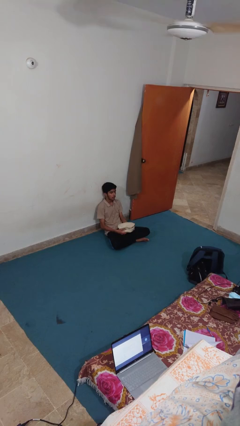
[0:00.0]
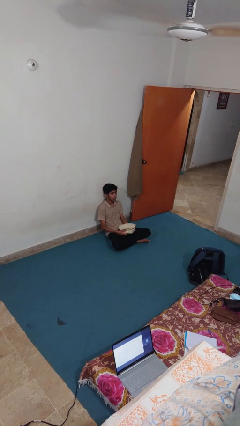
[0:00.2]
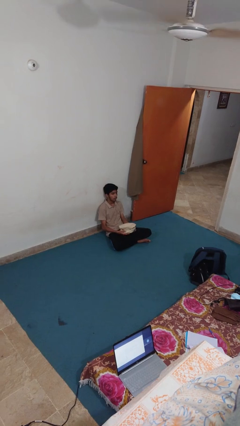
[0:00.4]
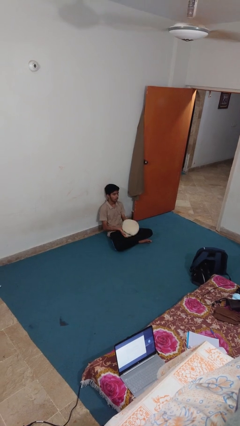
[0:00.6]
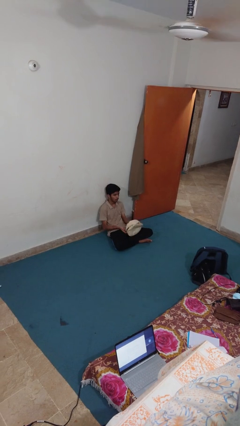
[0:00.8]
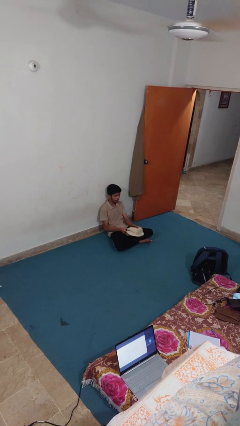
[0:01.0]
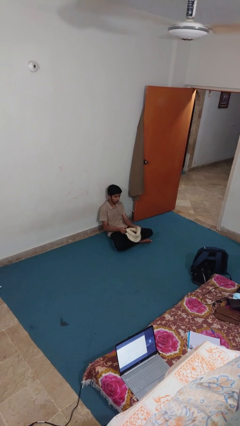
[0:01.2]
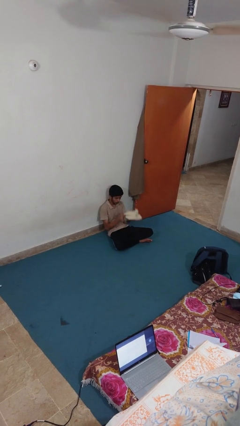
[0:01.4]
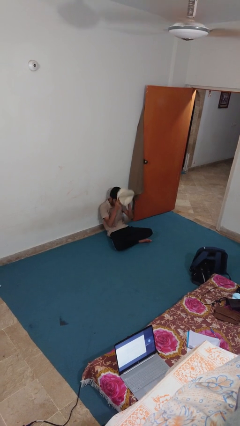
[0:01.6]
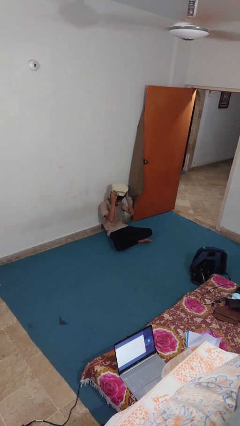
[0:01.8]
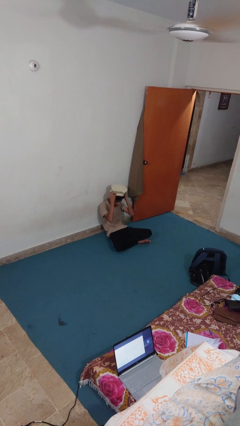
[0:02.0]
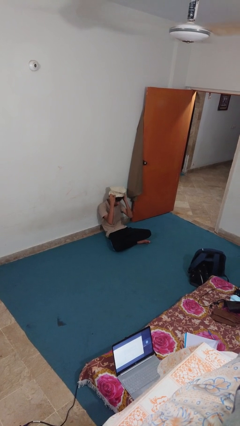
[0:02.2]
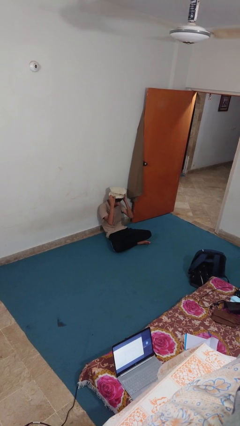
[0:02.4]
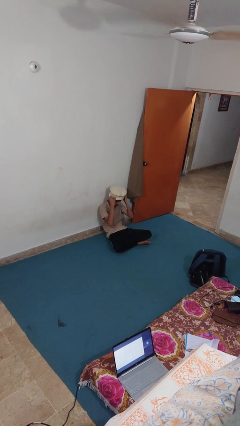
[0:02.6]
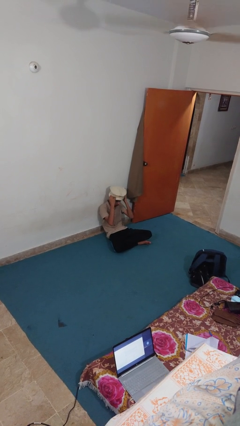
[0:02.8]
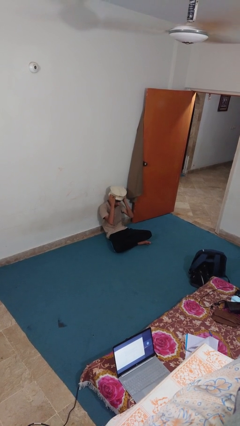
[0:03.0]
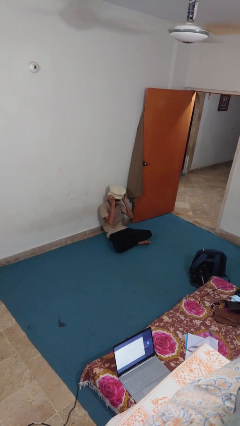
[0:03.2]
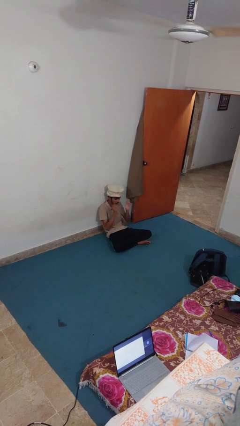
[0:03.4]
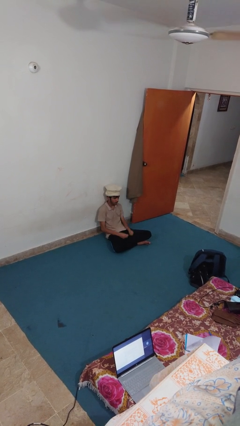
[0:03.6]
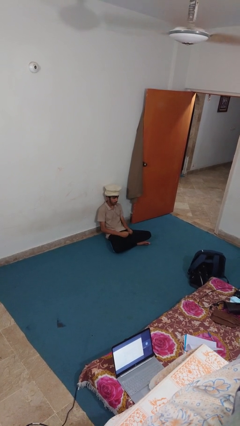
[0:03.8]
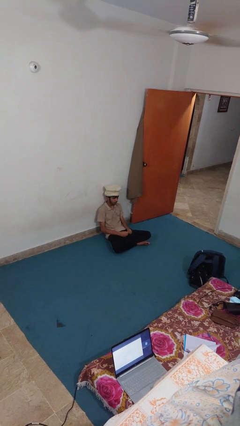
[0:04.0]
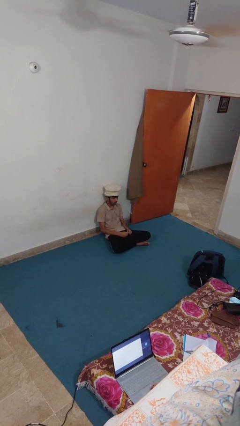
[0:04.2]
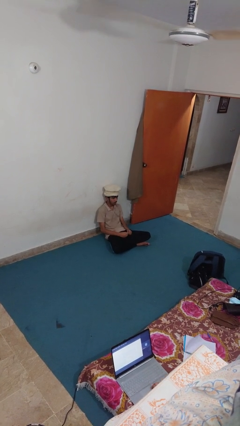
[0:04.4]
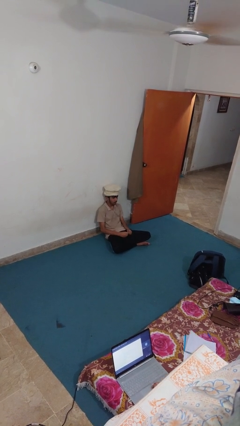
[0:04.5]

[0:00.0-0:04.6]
person puts on hat

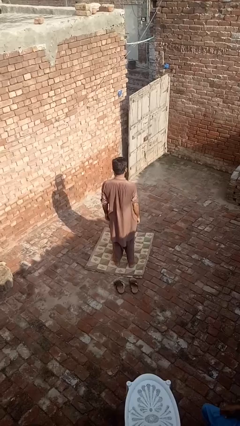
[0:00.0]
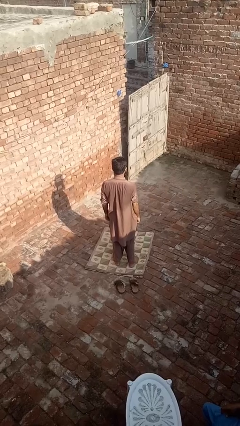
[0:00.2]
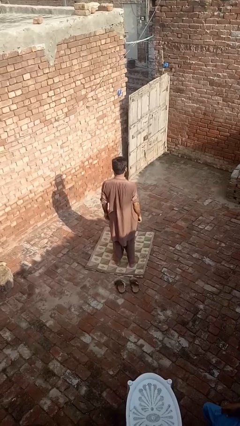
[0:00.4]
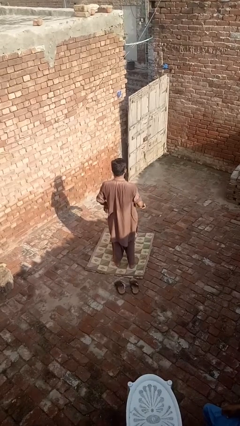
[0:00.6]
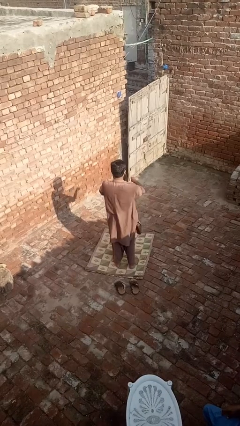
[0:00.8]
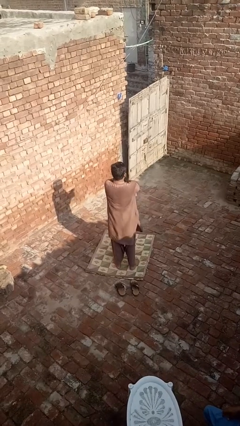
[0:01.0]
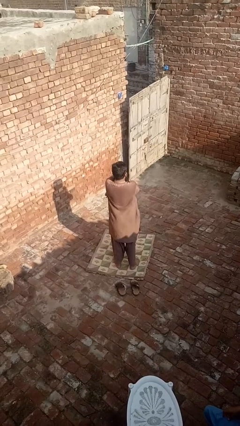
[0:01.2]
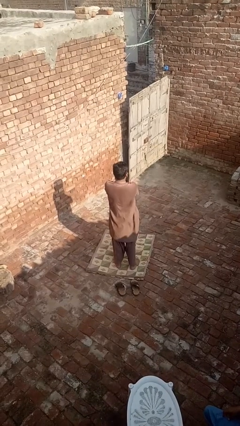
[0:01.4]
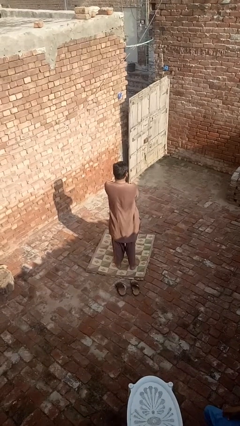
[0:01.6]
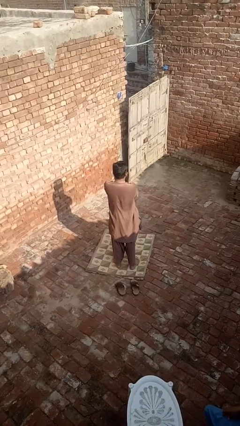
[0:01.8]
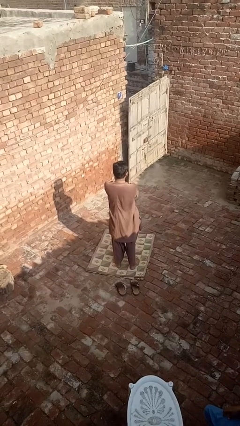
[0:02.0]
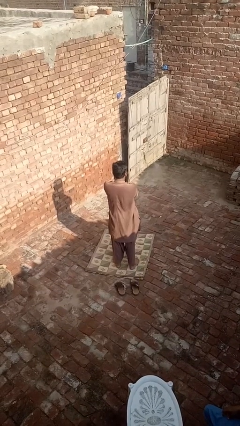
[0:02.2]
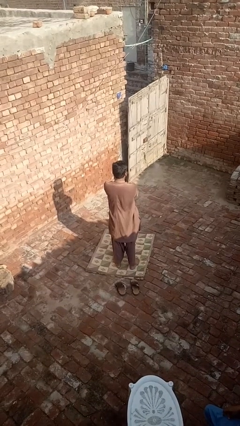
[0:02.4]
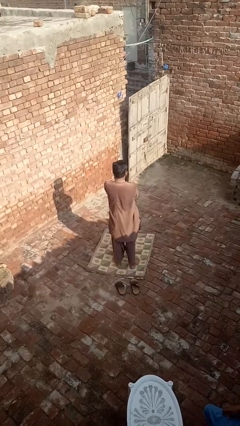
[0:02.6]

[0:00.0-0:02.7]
person crosses arms

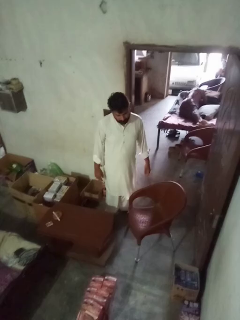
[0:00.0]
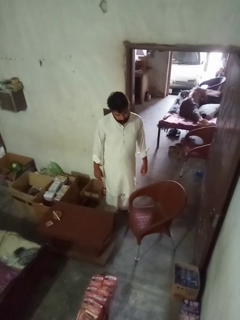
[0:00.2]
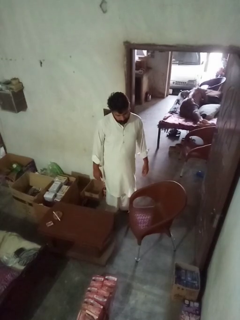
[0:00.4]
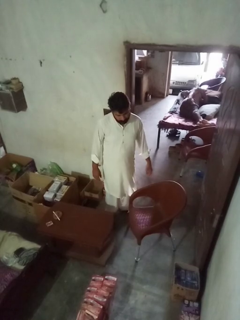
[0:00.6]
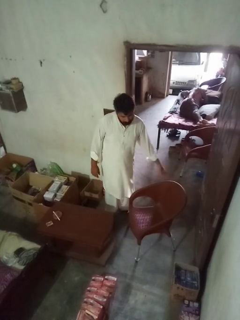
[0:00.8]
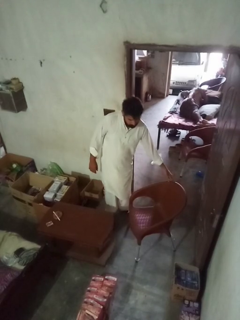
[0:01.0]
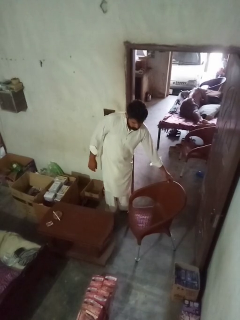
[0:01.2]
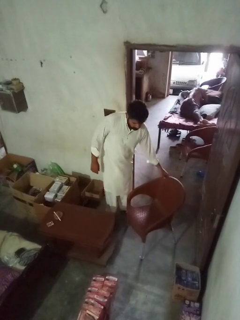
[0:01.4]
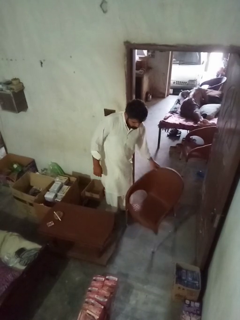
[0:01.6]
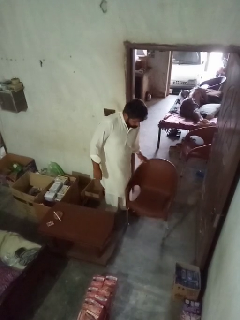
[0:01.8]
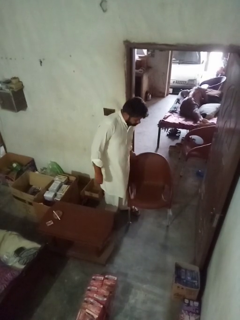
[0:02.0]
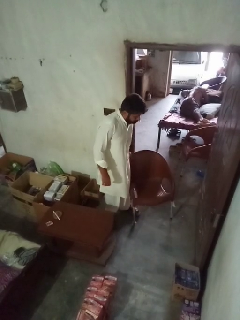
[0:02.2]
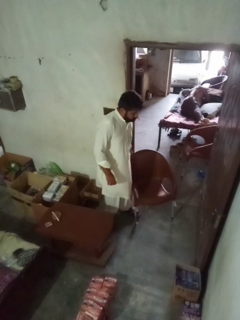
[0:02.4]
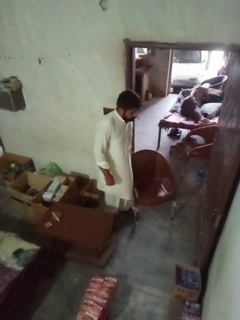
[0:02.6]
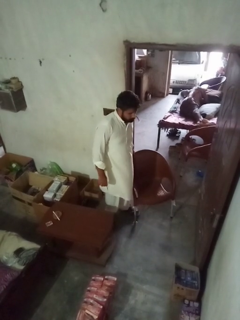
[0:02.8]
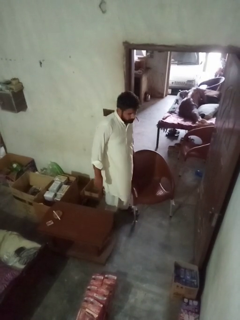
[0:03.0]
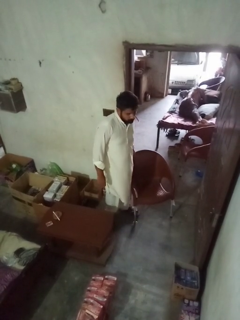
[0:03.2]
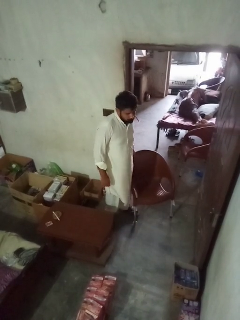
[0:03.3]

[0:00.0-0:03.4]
person pulls out chair

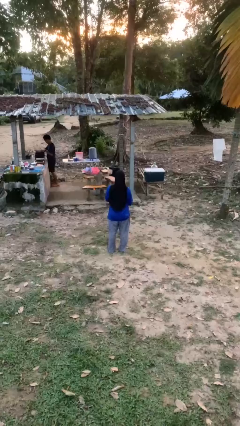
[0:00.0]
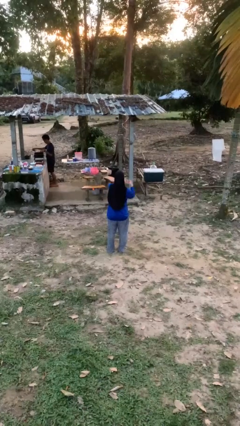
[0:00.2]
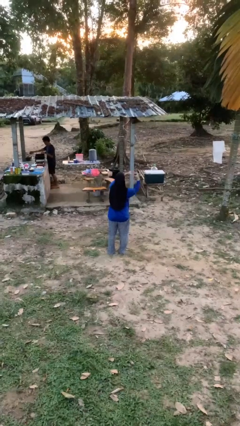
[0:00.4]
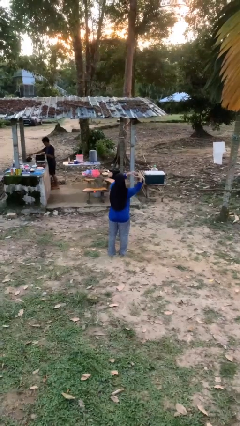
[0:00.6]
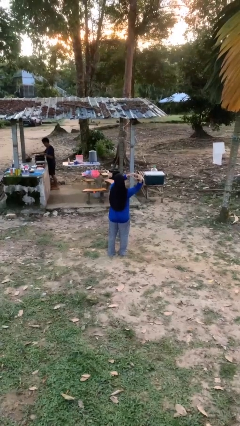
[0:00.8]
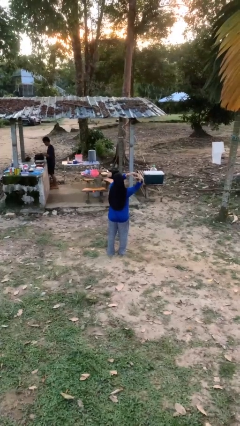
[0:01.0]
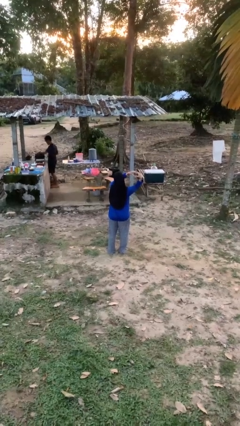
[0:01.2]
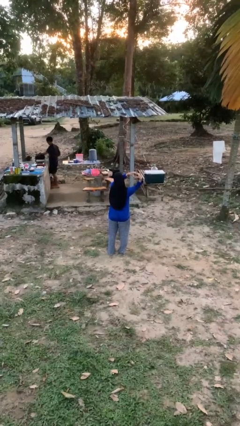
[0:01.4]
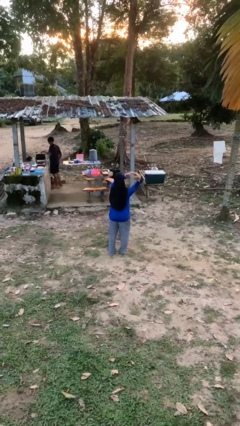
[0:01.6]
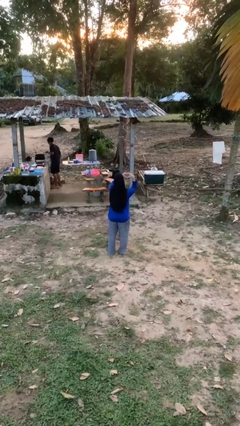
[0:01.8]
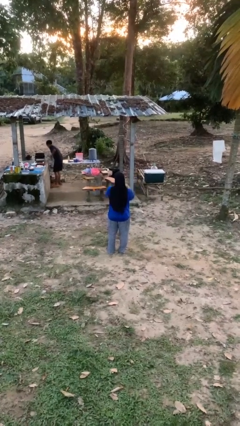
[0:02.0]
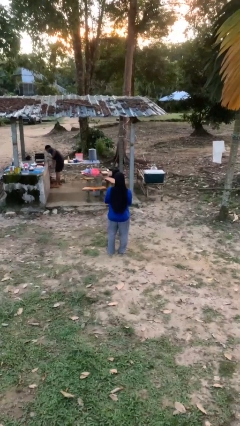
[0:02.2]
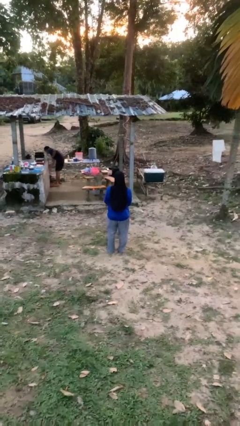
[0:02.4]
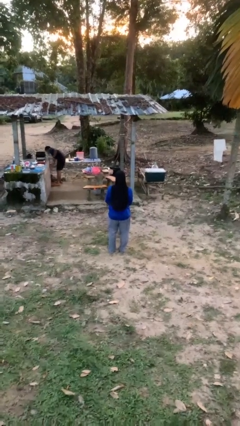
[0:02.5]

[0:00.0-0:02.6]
person gestures heart

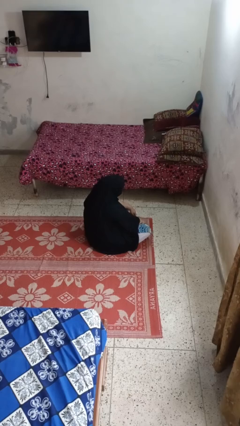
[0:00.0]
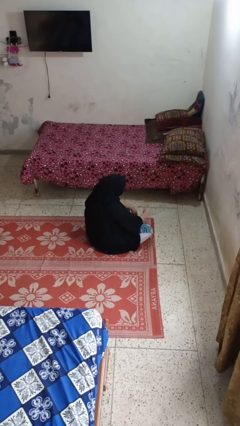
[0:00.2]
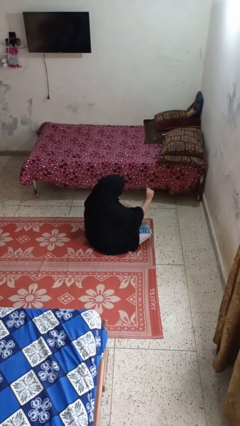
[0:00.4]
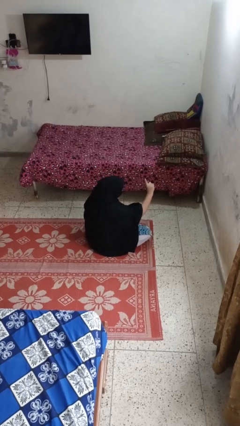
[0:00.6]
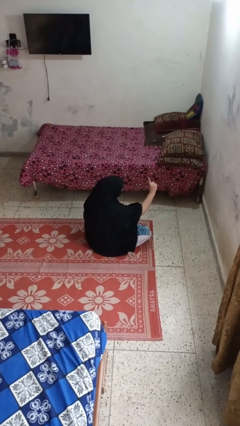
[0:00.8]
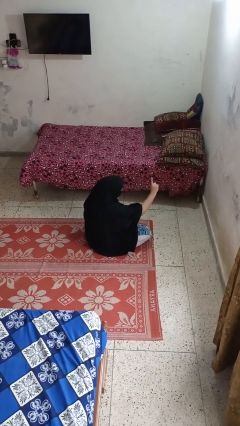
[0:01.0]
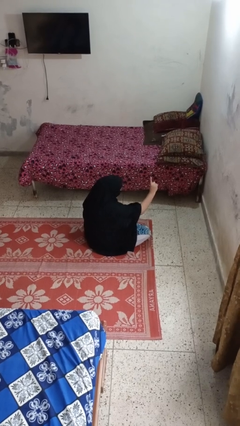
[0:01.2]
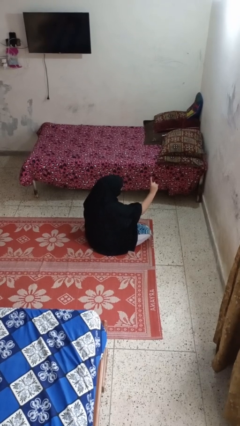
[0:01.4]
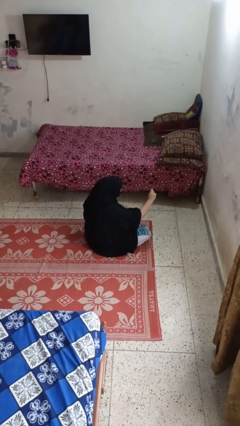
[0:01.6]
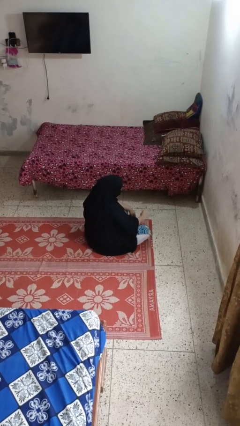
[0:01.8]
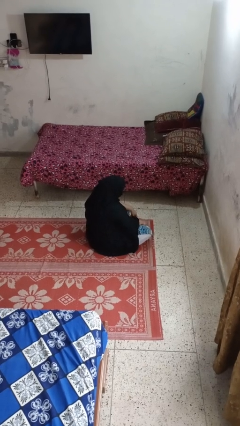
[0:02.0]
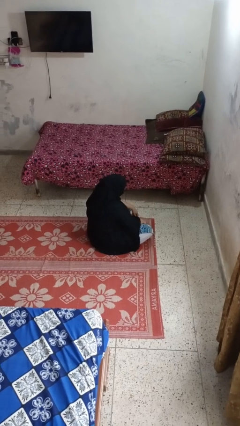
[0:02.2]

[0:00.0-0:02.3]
person gestures number one

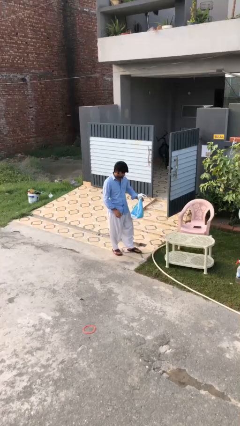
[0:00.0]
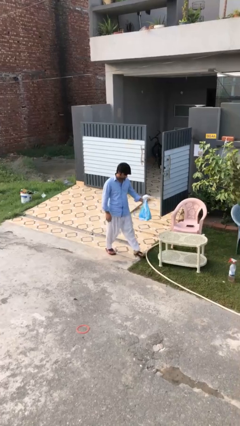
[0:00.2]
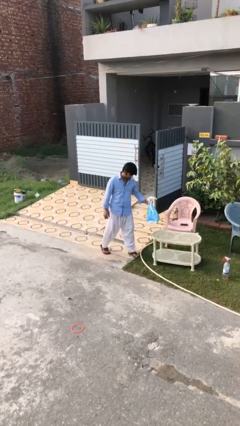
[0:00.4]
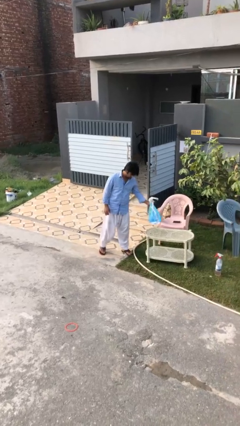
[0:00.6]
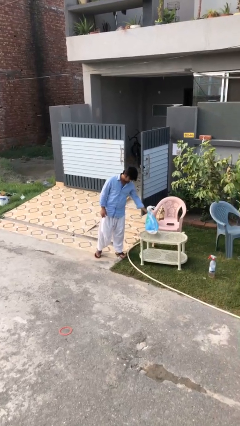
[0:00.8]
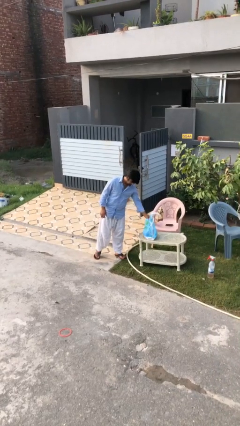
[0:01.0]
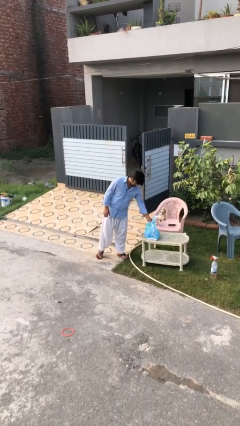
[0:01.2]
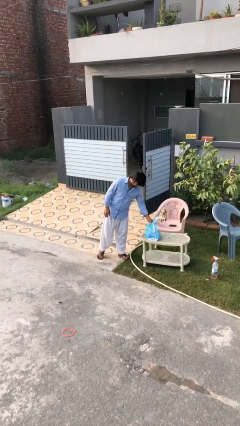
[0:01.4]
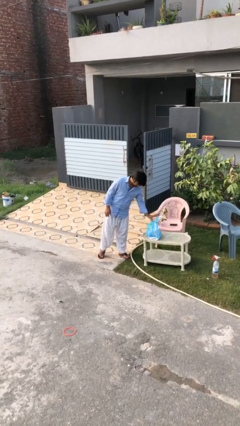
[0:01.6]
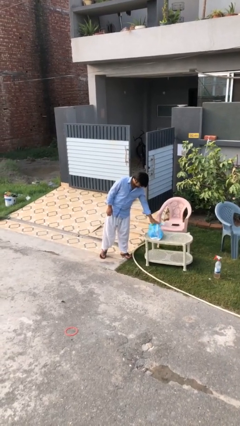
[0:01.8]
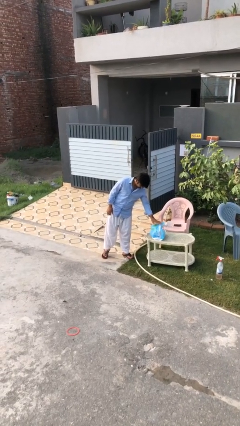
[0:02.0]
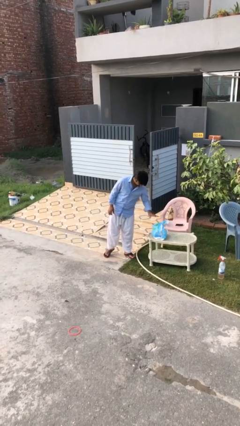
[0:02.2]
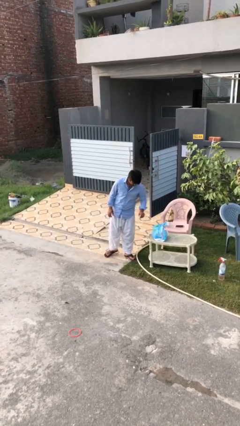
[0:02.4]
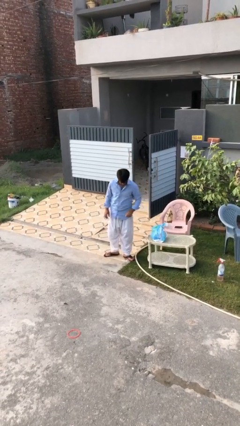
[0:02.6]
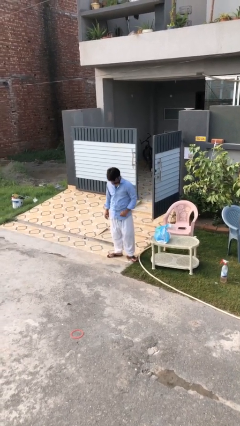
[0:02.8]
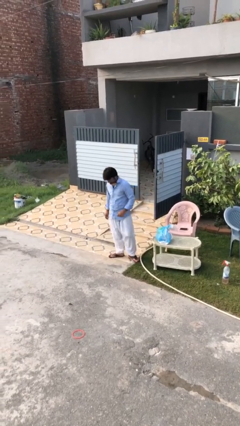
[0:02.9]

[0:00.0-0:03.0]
person puts down object on table
